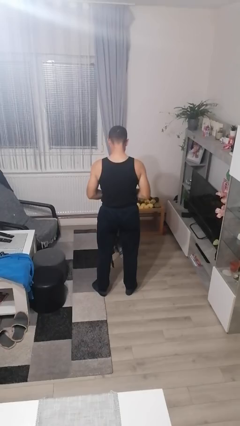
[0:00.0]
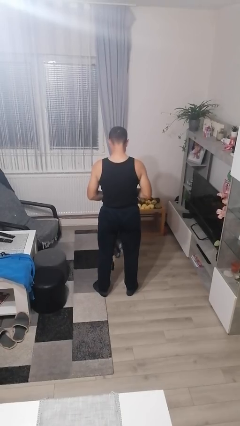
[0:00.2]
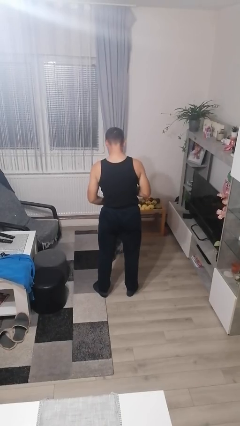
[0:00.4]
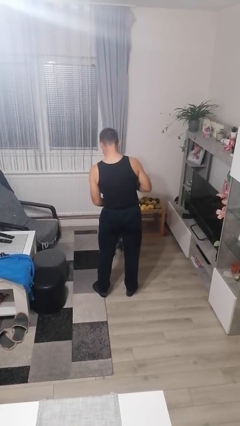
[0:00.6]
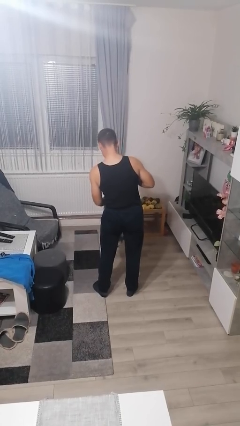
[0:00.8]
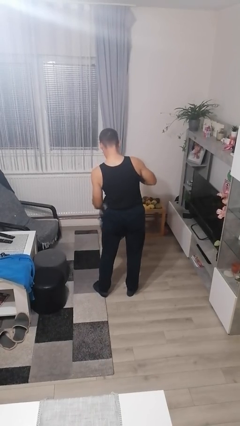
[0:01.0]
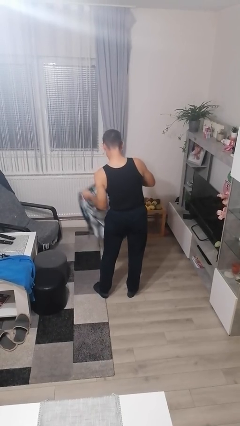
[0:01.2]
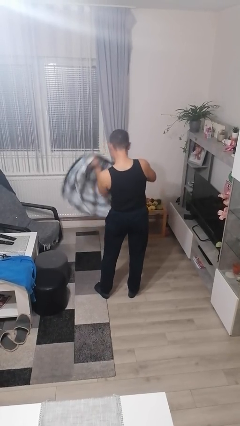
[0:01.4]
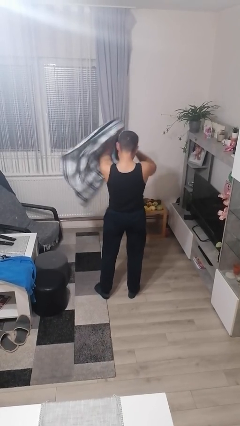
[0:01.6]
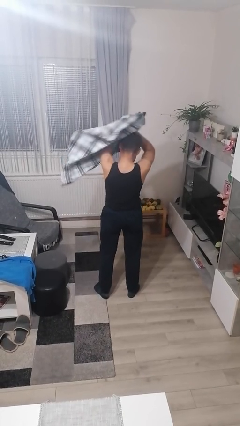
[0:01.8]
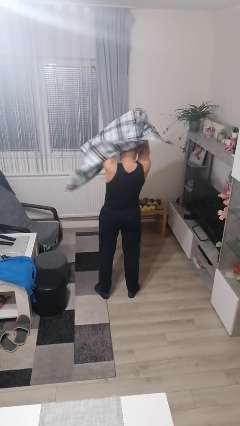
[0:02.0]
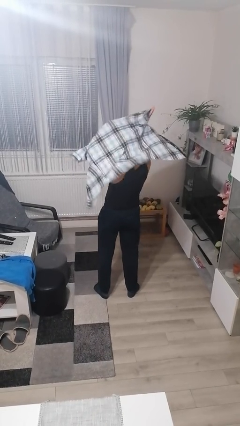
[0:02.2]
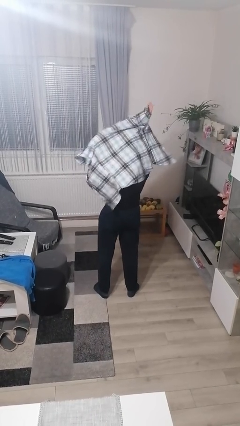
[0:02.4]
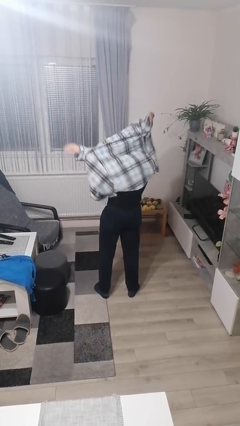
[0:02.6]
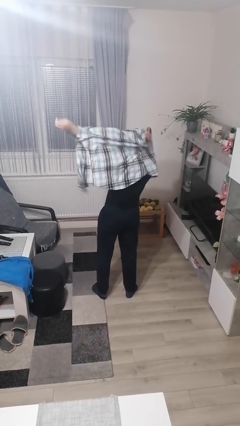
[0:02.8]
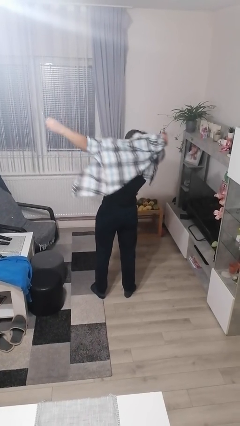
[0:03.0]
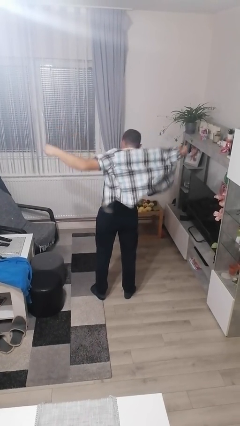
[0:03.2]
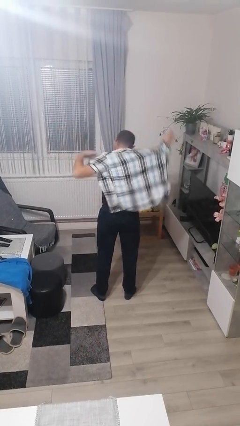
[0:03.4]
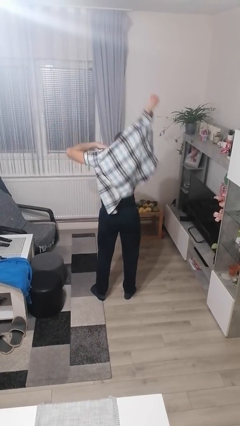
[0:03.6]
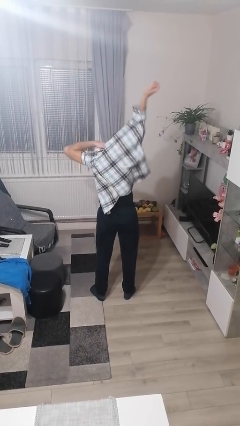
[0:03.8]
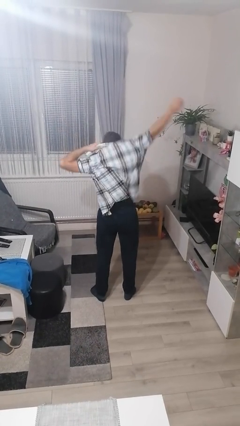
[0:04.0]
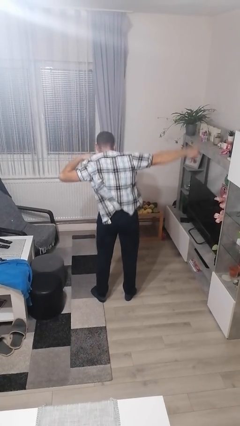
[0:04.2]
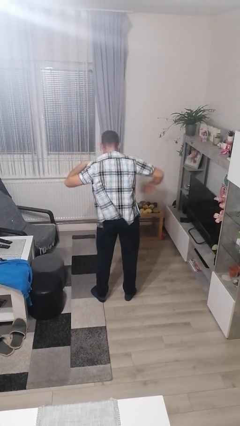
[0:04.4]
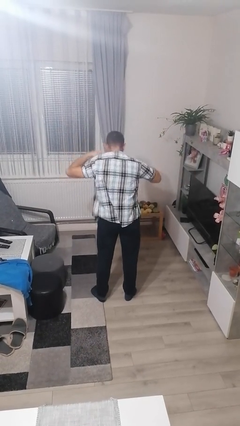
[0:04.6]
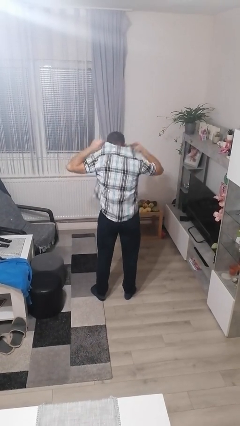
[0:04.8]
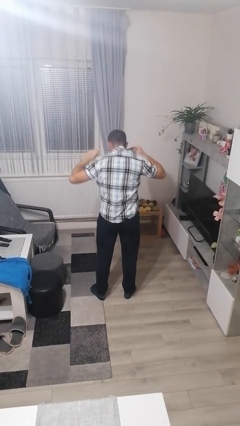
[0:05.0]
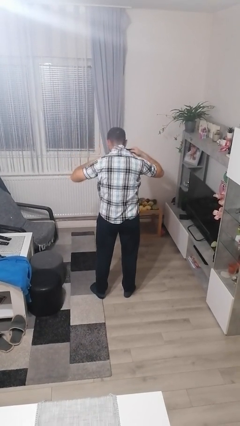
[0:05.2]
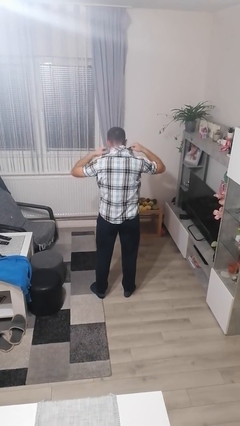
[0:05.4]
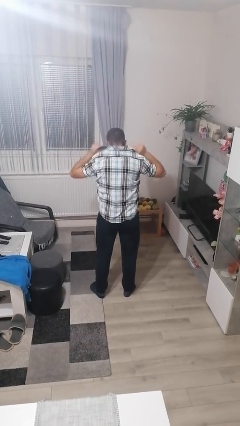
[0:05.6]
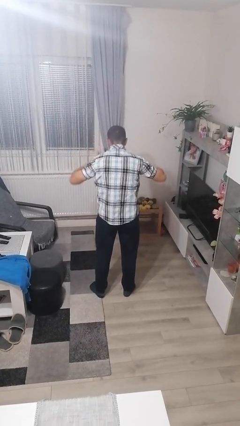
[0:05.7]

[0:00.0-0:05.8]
person puts on shirt

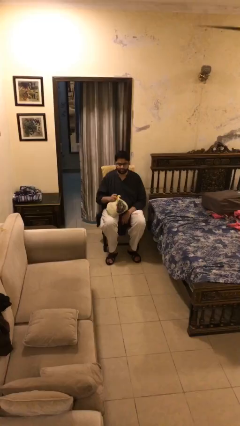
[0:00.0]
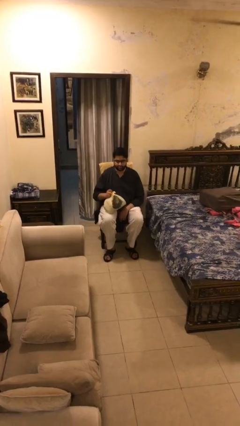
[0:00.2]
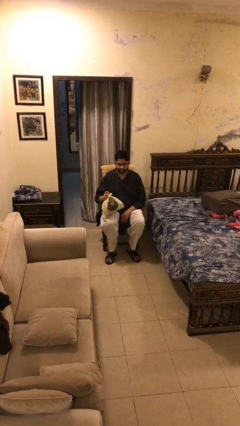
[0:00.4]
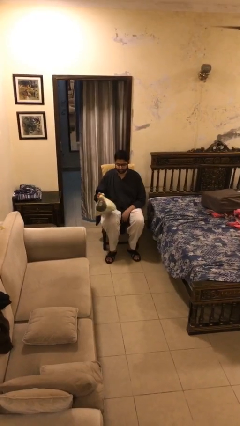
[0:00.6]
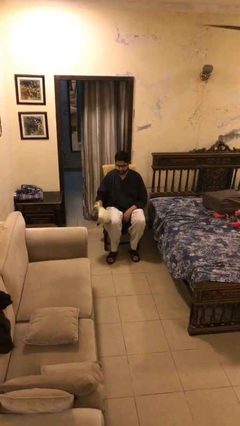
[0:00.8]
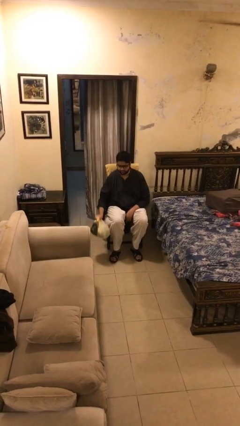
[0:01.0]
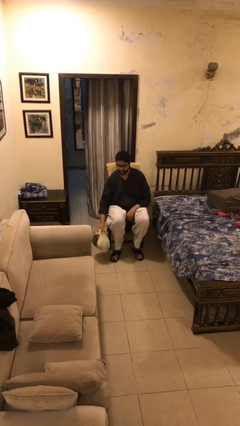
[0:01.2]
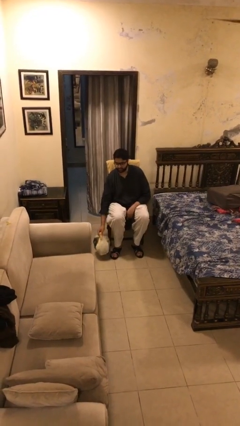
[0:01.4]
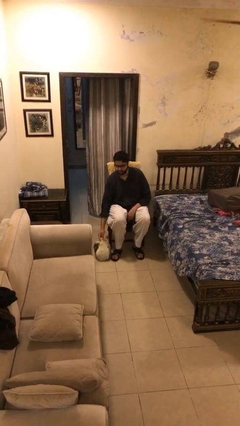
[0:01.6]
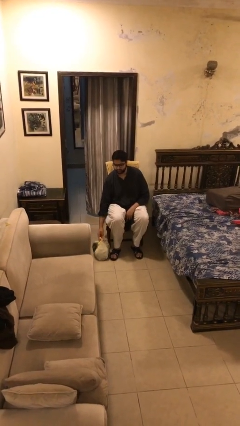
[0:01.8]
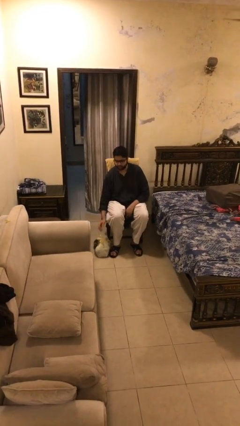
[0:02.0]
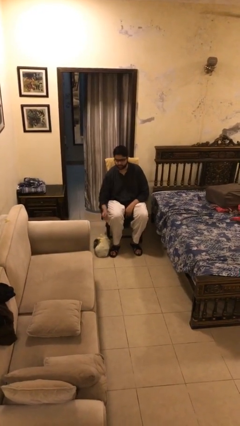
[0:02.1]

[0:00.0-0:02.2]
person puts down object on floor

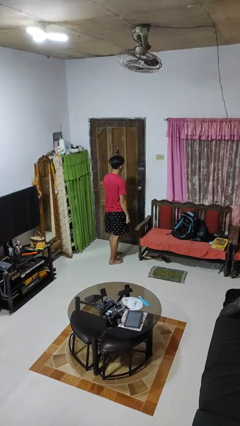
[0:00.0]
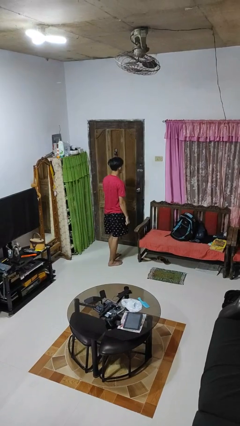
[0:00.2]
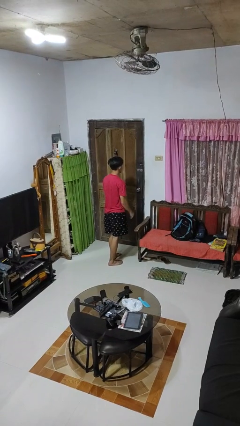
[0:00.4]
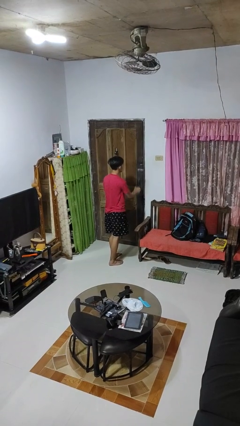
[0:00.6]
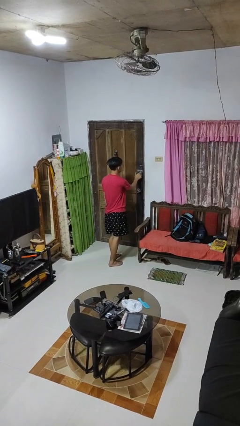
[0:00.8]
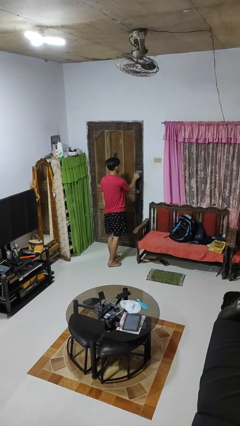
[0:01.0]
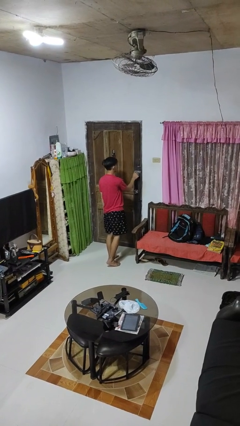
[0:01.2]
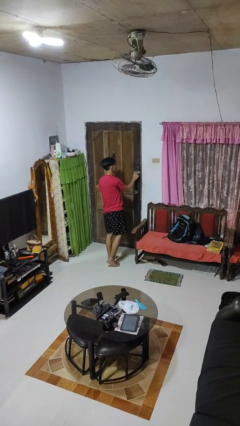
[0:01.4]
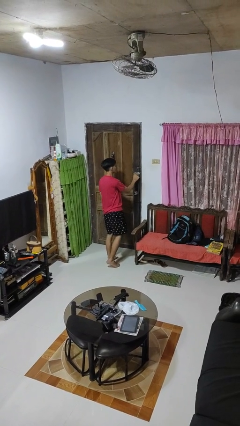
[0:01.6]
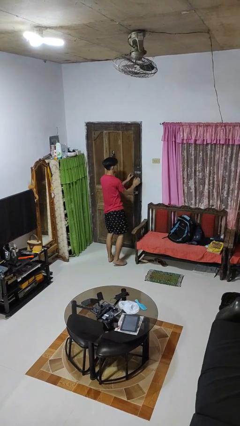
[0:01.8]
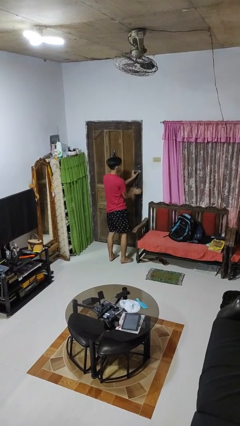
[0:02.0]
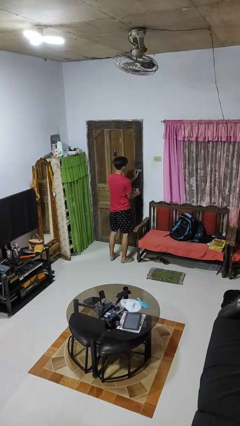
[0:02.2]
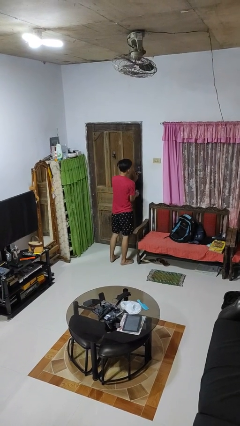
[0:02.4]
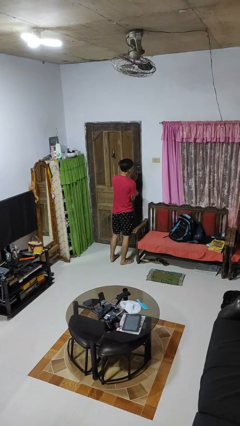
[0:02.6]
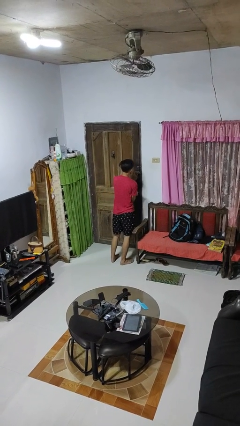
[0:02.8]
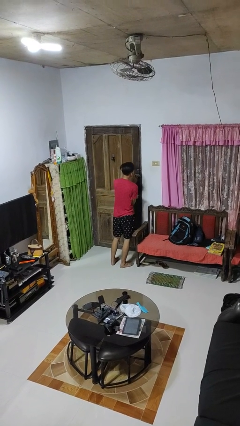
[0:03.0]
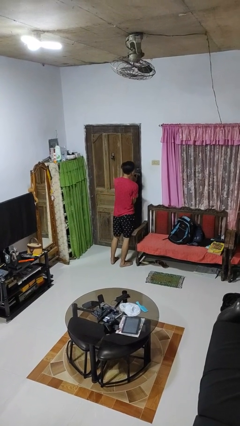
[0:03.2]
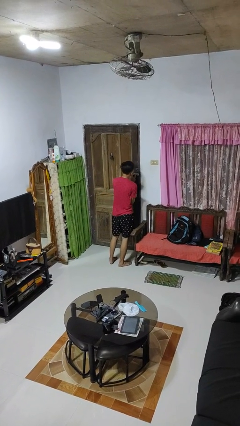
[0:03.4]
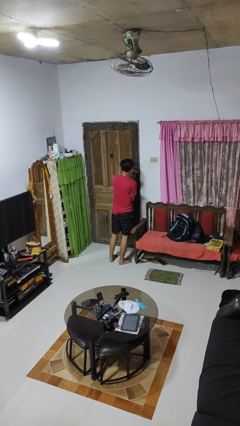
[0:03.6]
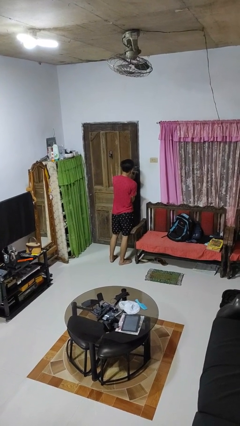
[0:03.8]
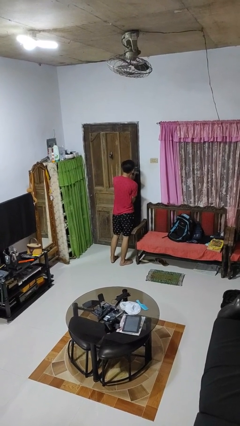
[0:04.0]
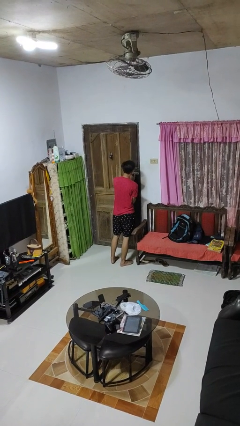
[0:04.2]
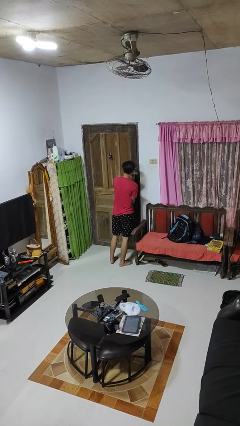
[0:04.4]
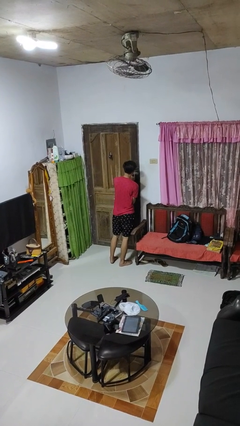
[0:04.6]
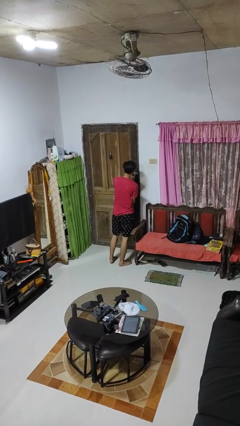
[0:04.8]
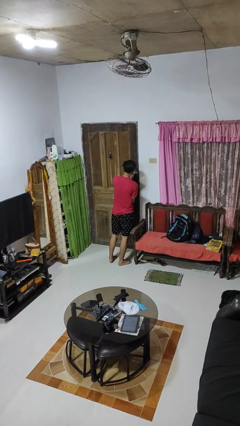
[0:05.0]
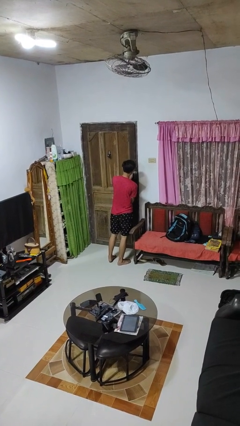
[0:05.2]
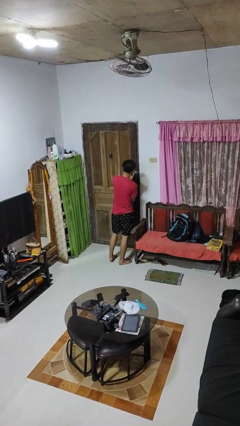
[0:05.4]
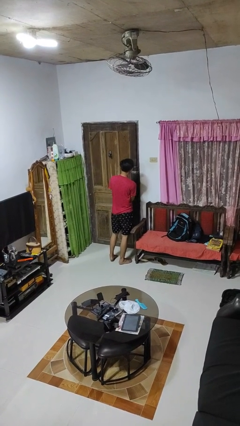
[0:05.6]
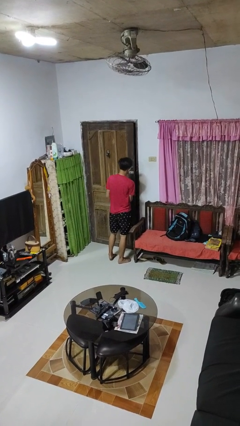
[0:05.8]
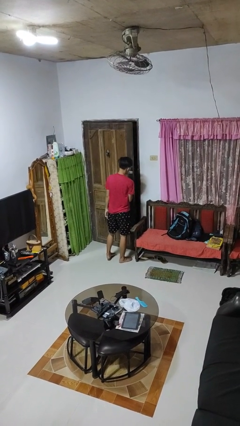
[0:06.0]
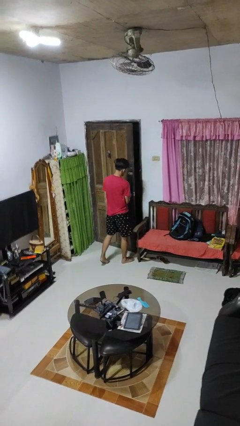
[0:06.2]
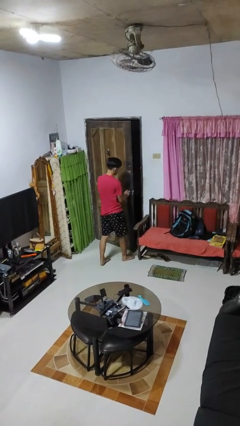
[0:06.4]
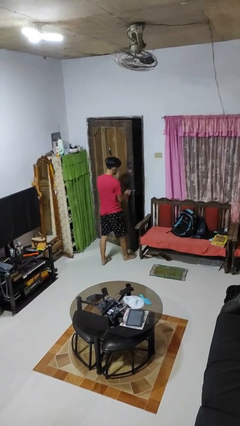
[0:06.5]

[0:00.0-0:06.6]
person unlocks door with keys

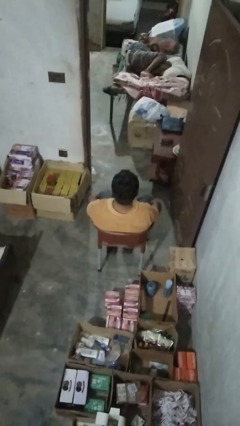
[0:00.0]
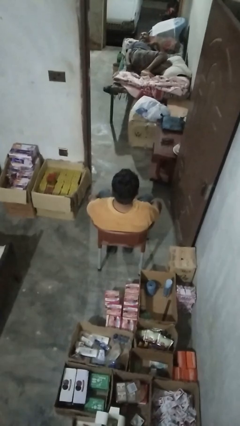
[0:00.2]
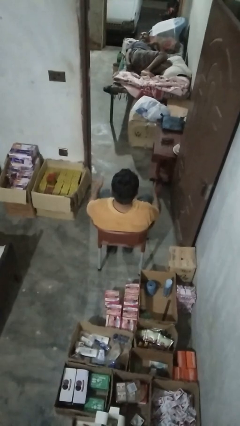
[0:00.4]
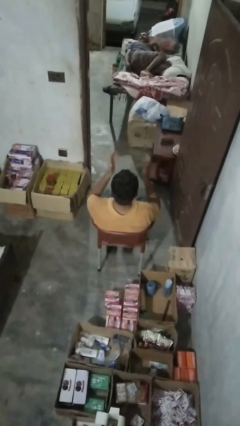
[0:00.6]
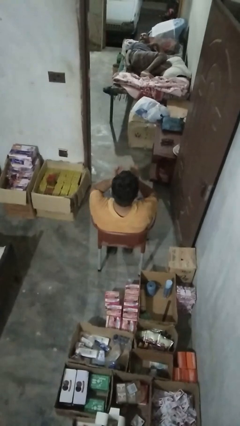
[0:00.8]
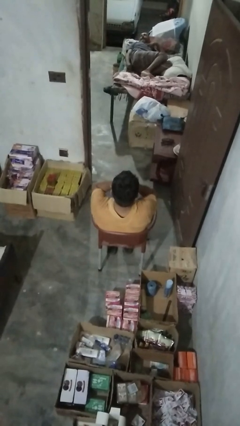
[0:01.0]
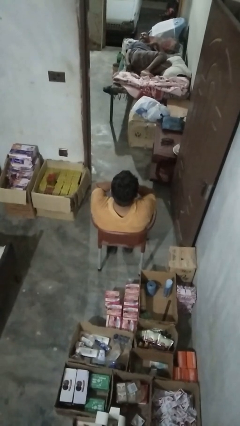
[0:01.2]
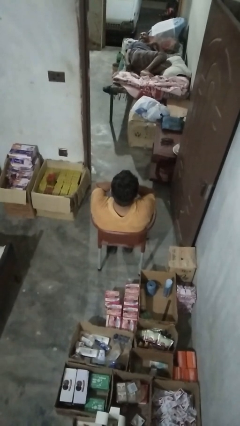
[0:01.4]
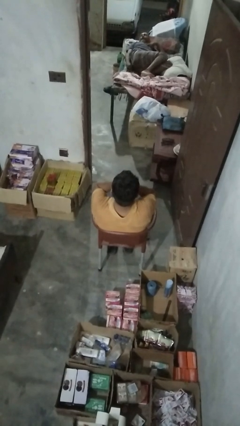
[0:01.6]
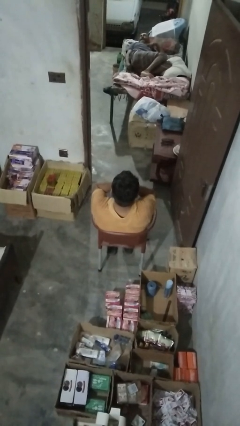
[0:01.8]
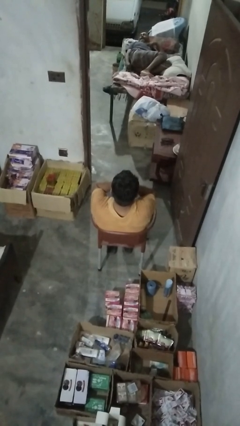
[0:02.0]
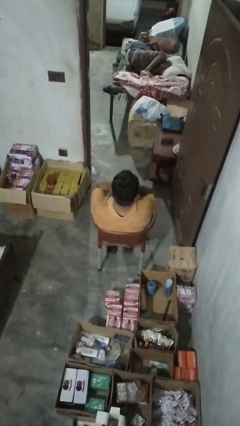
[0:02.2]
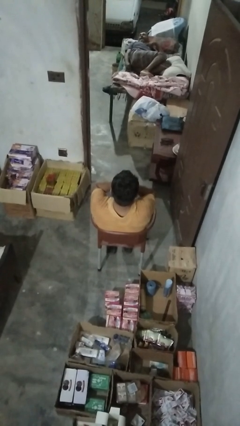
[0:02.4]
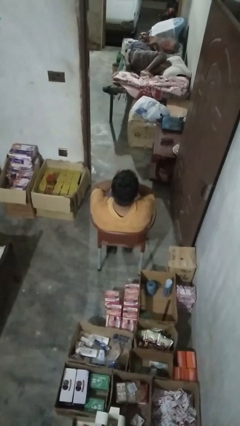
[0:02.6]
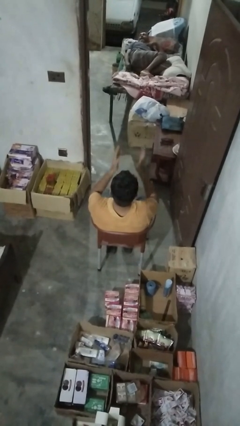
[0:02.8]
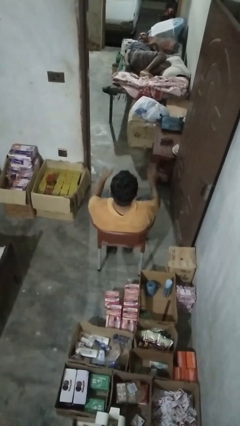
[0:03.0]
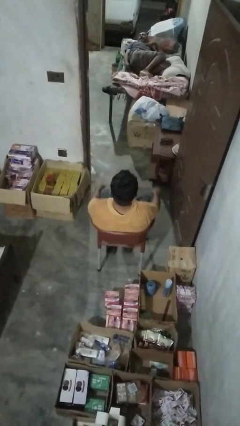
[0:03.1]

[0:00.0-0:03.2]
person covers face with hands
